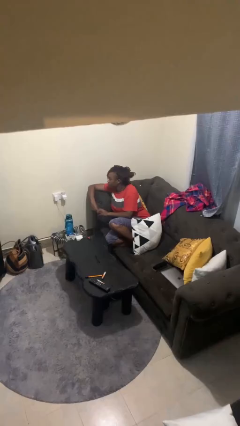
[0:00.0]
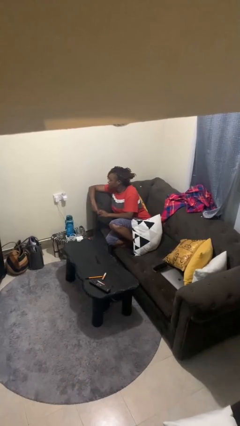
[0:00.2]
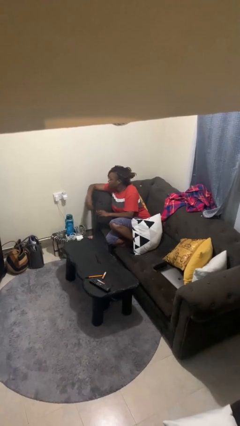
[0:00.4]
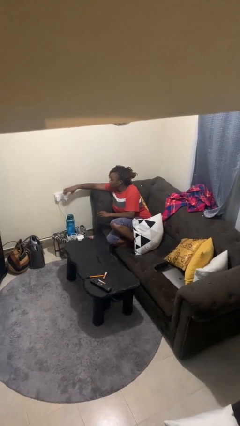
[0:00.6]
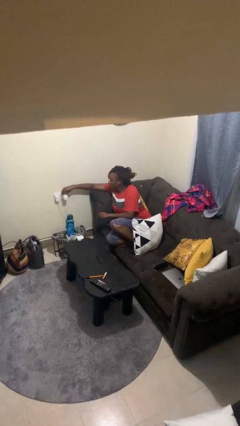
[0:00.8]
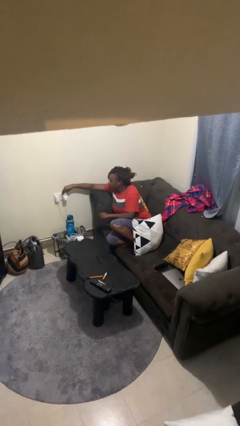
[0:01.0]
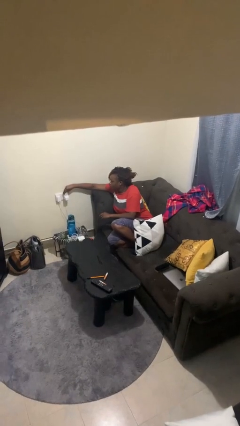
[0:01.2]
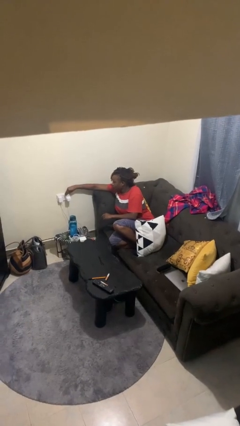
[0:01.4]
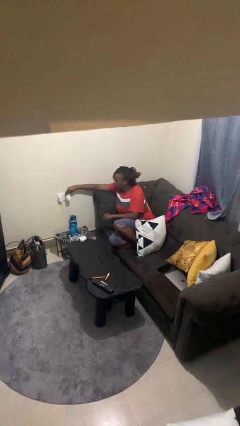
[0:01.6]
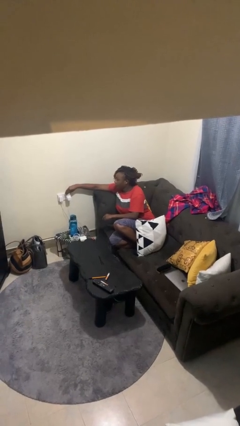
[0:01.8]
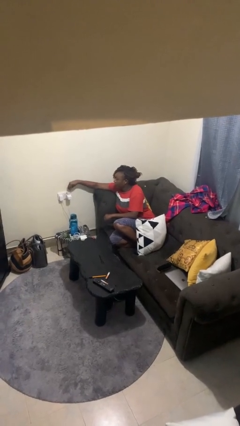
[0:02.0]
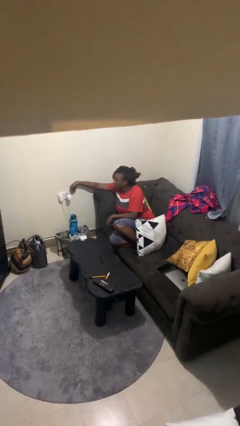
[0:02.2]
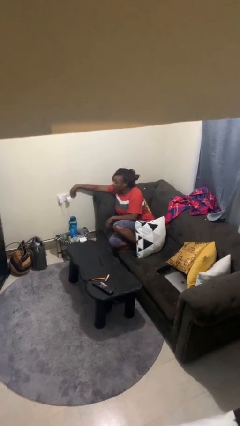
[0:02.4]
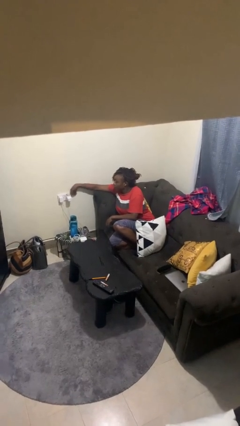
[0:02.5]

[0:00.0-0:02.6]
person plugs into electrical socket

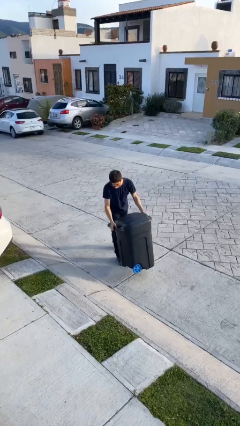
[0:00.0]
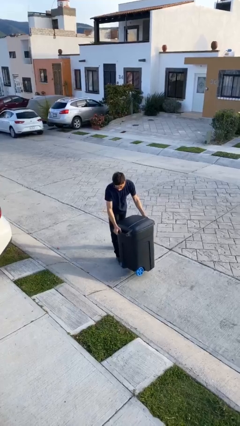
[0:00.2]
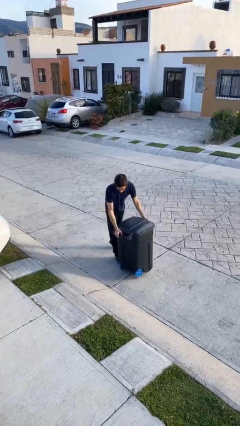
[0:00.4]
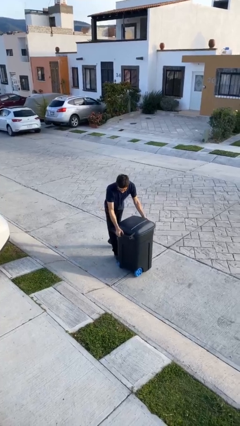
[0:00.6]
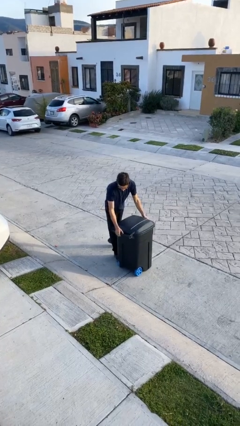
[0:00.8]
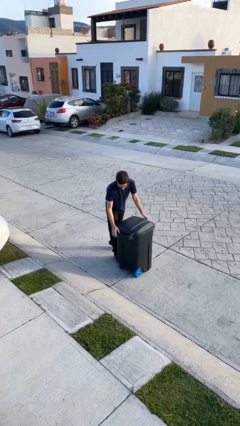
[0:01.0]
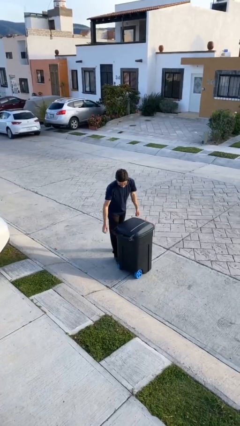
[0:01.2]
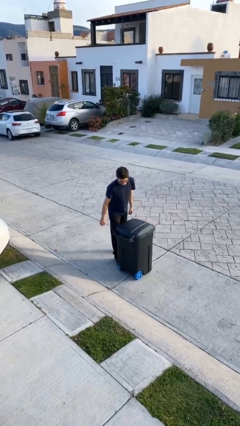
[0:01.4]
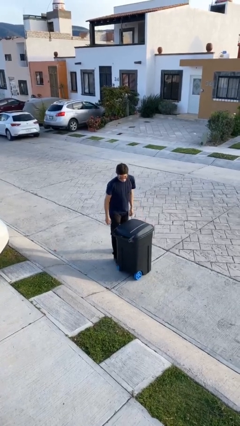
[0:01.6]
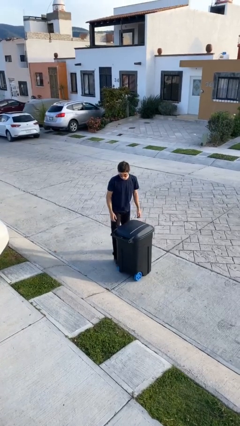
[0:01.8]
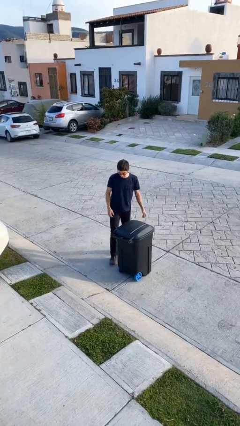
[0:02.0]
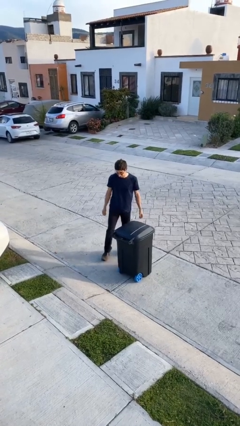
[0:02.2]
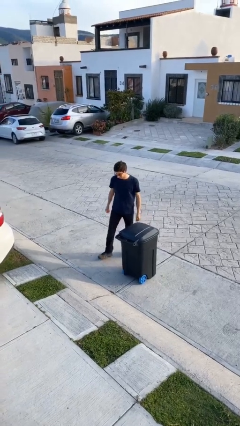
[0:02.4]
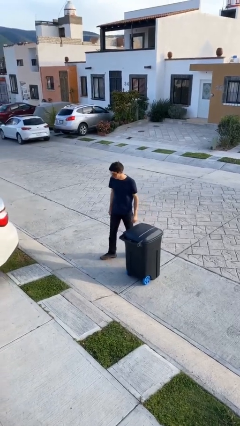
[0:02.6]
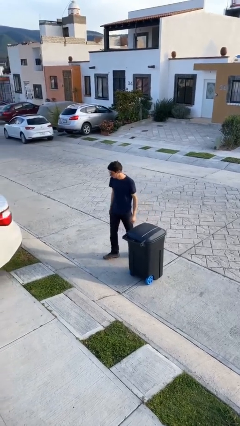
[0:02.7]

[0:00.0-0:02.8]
person puts down object on floor

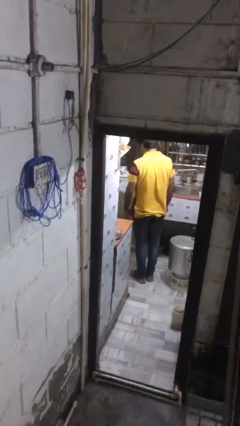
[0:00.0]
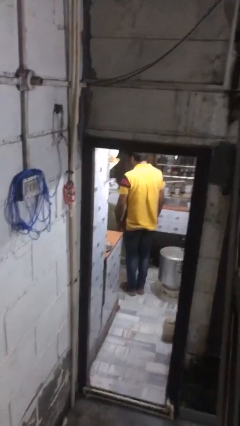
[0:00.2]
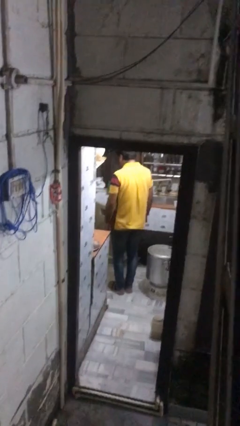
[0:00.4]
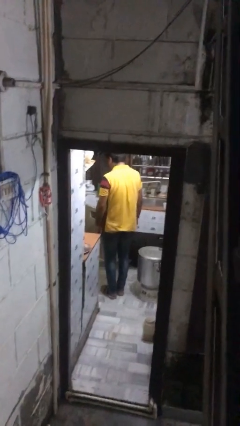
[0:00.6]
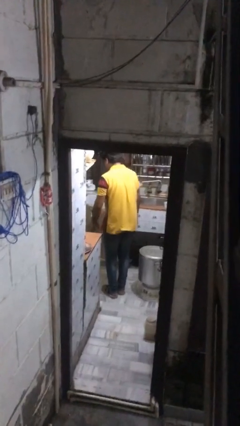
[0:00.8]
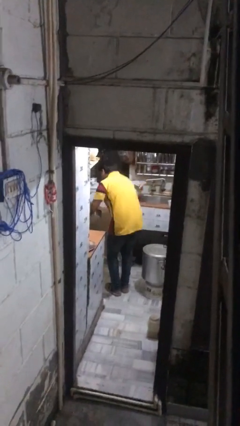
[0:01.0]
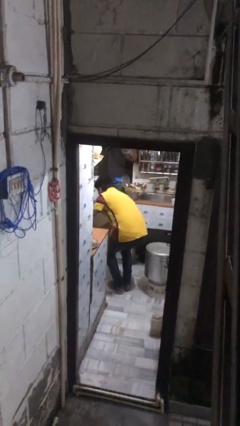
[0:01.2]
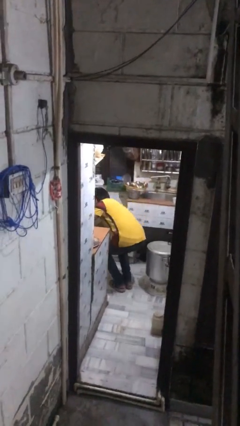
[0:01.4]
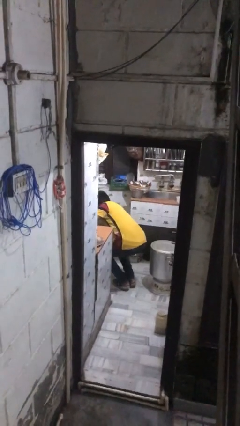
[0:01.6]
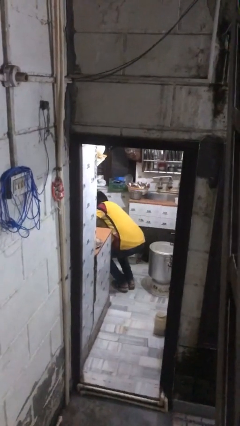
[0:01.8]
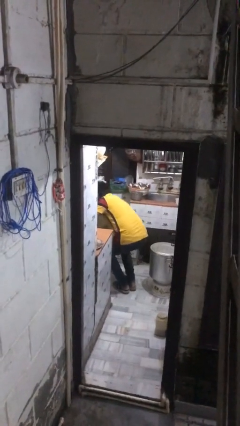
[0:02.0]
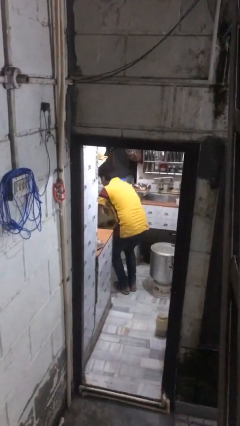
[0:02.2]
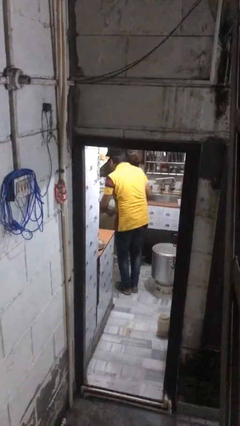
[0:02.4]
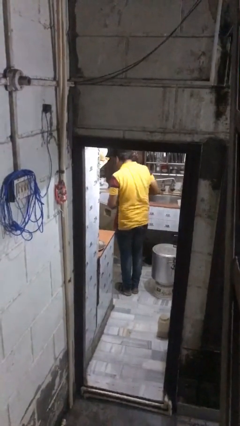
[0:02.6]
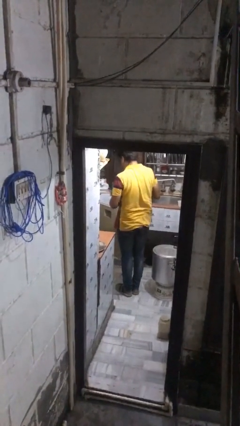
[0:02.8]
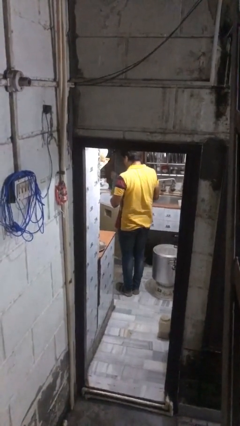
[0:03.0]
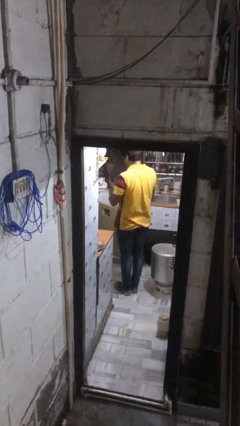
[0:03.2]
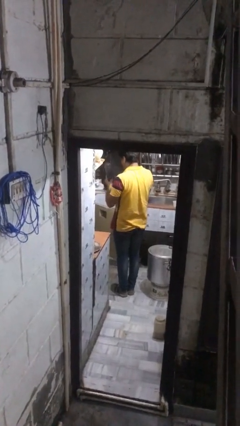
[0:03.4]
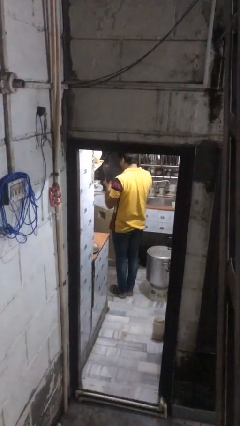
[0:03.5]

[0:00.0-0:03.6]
person takes object from kitchen drawer

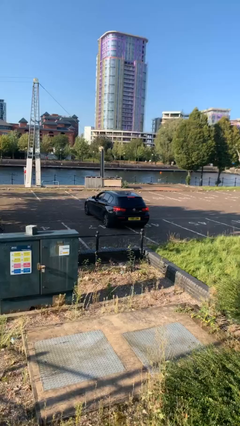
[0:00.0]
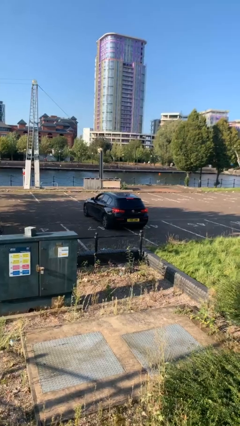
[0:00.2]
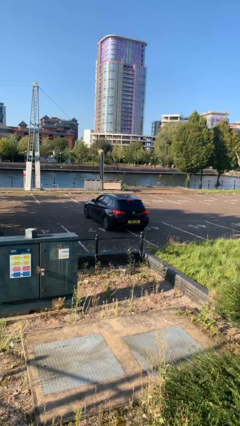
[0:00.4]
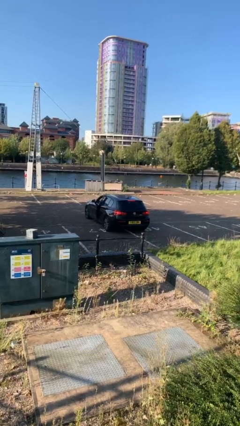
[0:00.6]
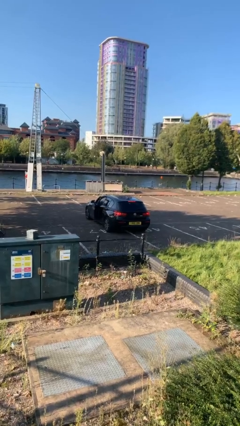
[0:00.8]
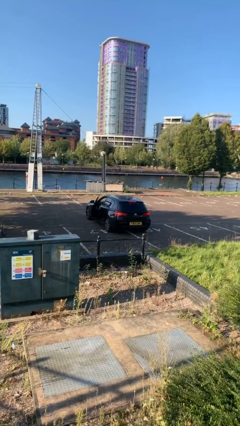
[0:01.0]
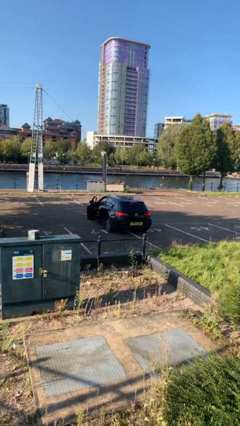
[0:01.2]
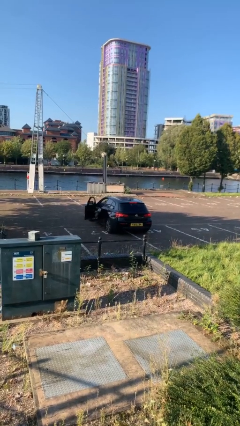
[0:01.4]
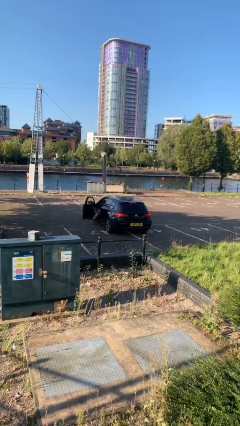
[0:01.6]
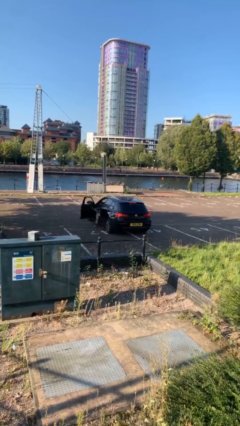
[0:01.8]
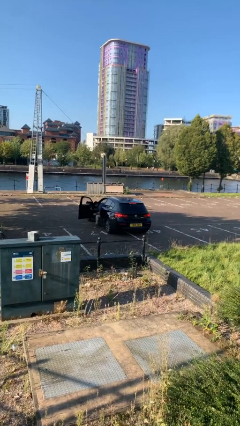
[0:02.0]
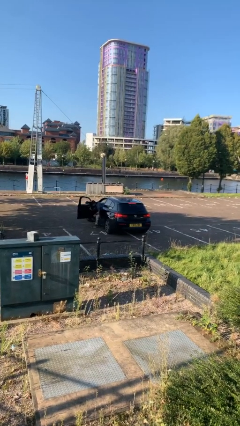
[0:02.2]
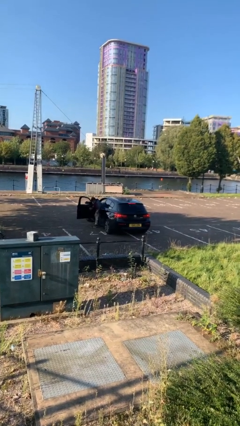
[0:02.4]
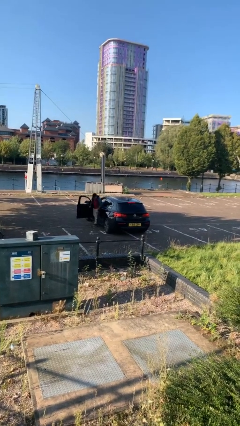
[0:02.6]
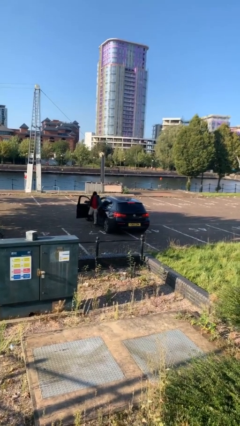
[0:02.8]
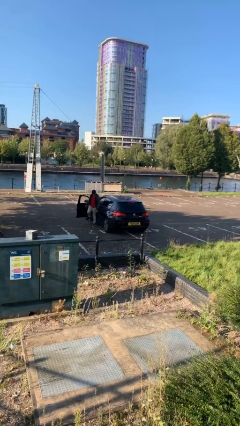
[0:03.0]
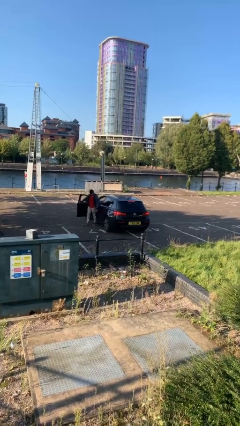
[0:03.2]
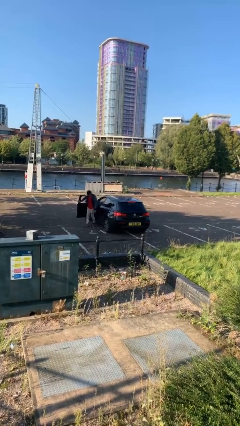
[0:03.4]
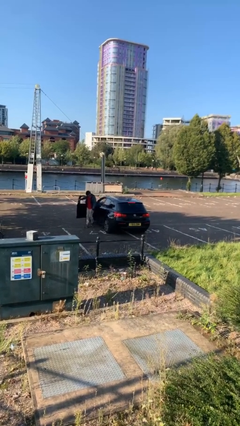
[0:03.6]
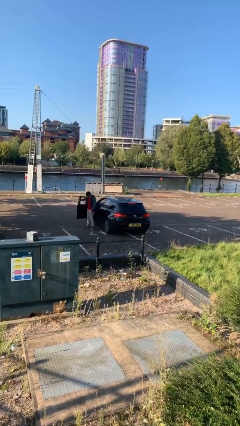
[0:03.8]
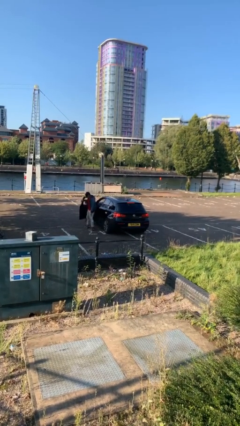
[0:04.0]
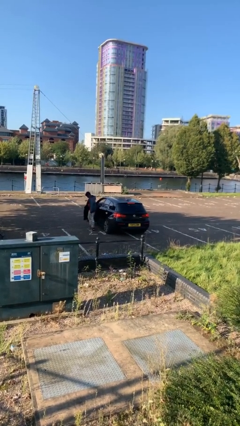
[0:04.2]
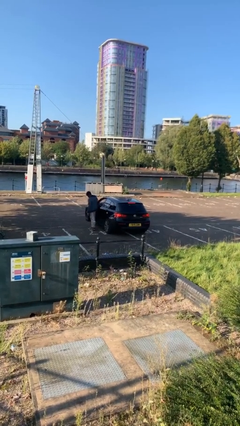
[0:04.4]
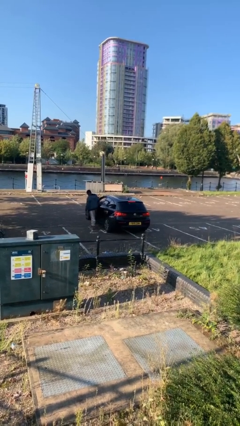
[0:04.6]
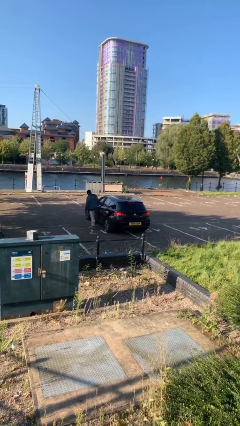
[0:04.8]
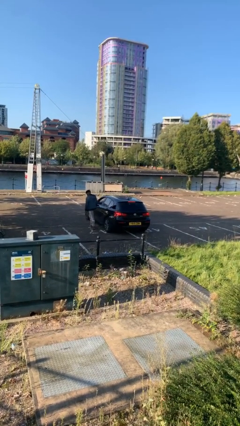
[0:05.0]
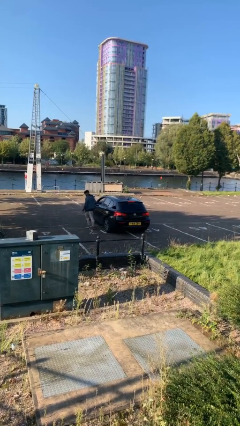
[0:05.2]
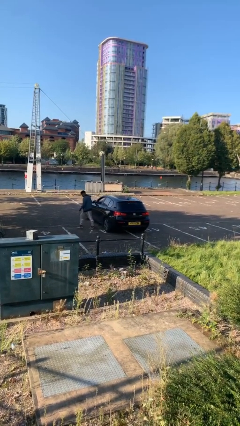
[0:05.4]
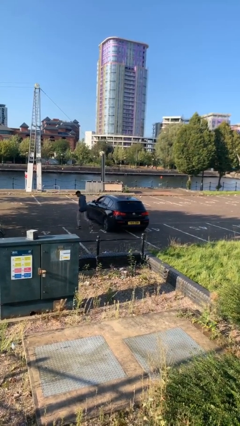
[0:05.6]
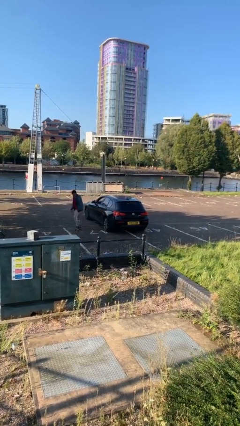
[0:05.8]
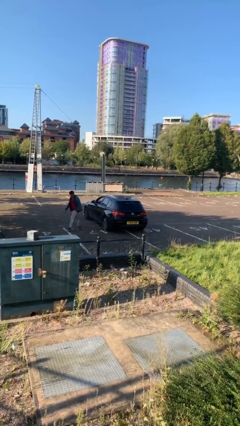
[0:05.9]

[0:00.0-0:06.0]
car drops off person

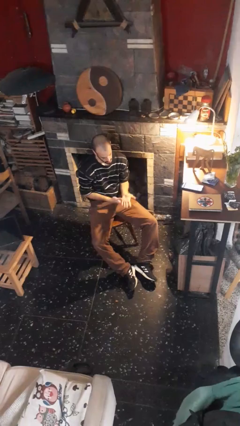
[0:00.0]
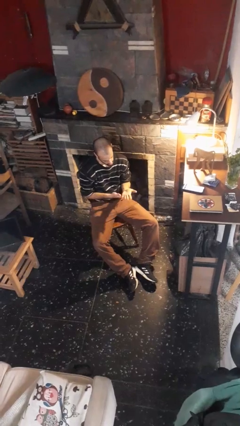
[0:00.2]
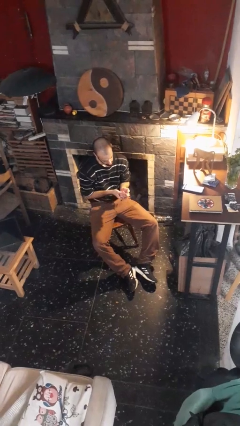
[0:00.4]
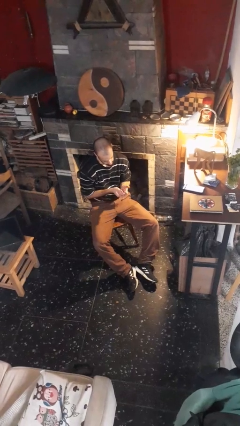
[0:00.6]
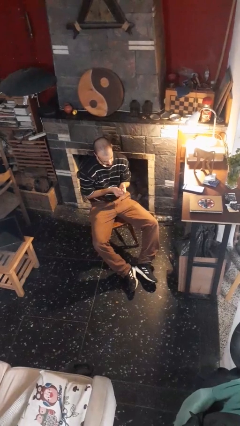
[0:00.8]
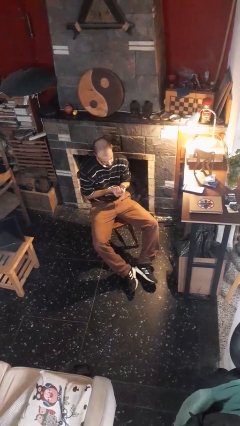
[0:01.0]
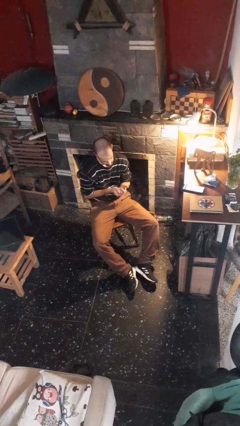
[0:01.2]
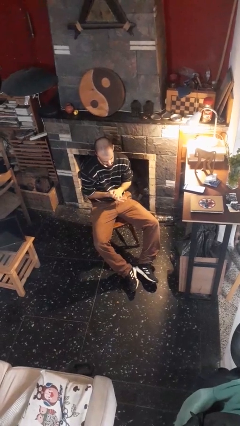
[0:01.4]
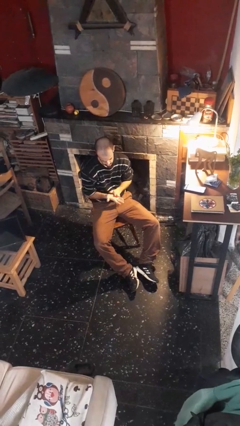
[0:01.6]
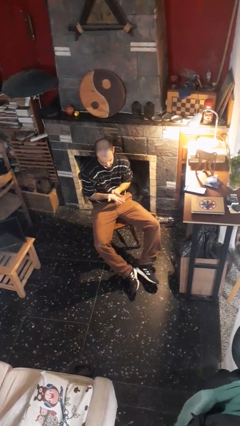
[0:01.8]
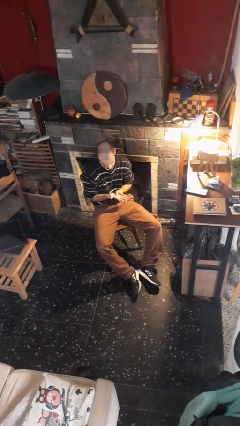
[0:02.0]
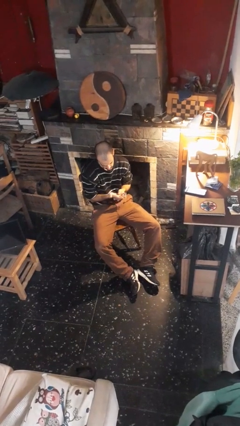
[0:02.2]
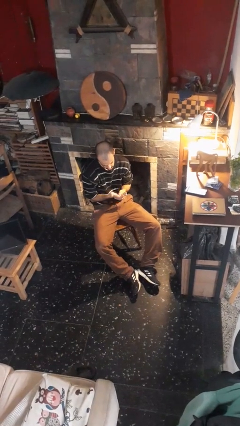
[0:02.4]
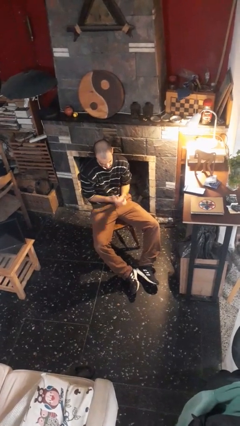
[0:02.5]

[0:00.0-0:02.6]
person looks at hands in lap
